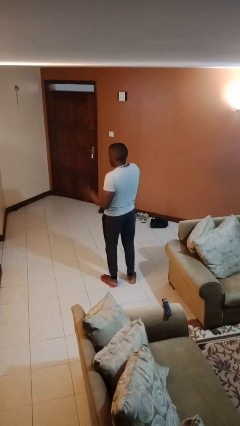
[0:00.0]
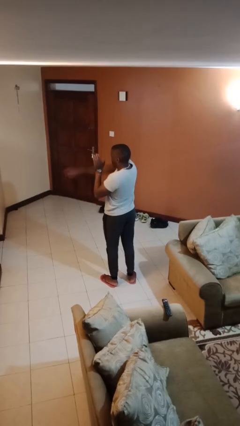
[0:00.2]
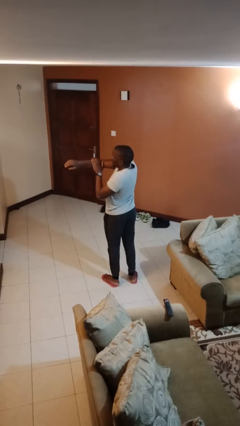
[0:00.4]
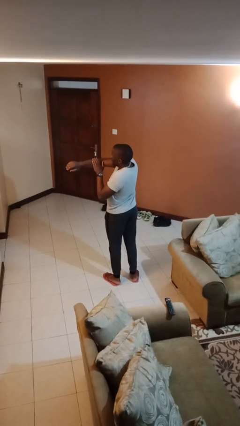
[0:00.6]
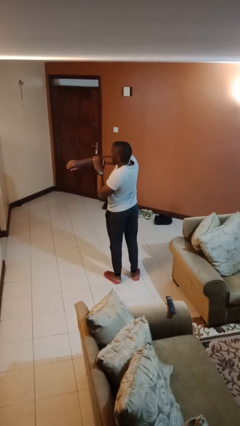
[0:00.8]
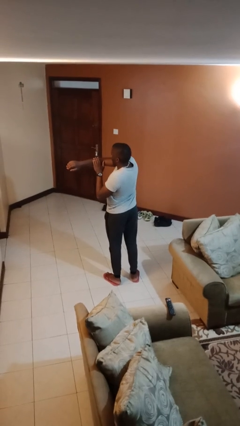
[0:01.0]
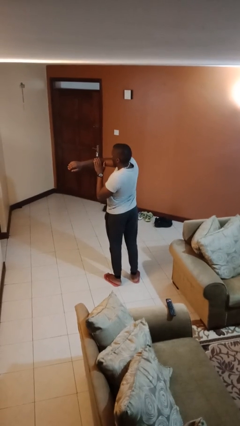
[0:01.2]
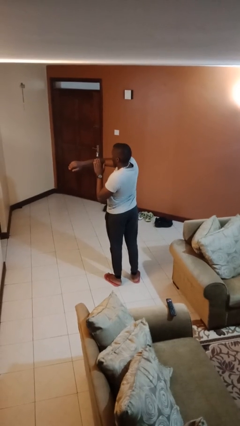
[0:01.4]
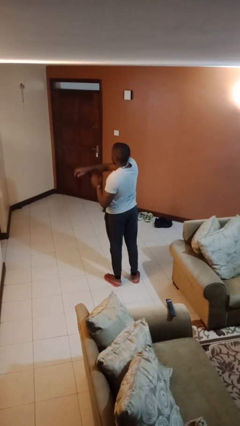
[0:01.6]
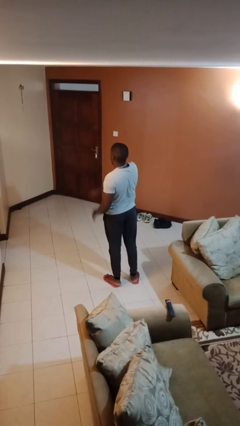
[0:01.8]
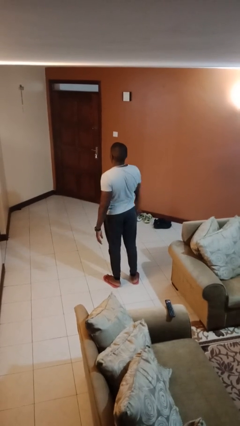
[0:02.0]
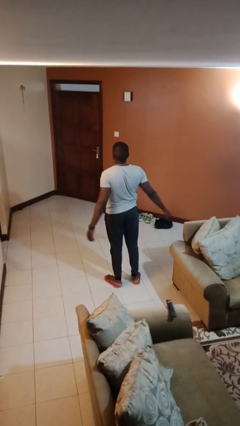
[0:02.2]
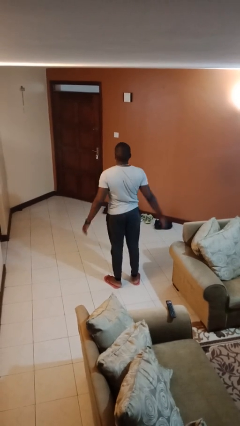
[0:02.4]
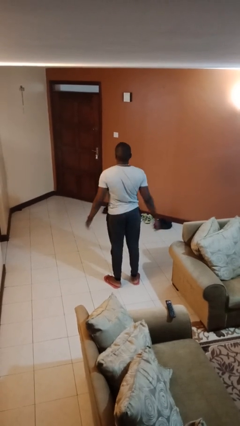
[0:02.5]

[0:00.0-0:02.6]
person swats bug

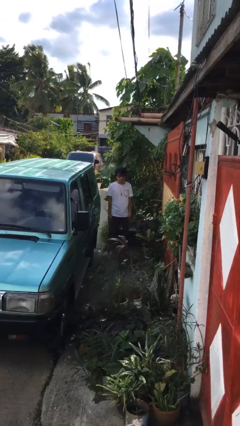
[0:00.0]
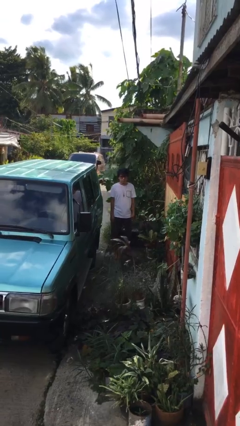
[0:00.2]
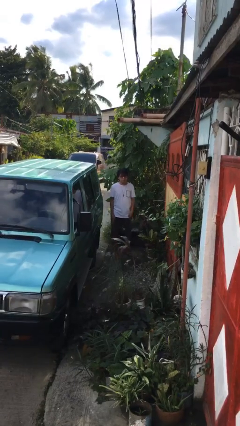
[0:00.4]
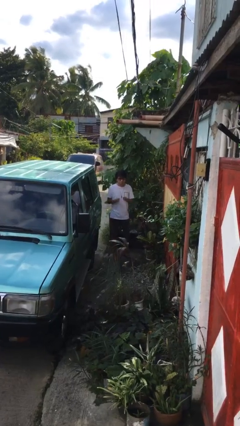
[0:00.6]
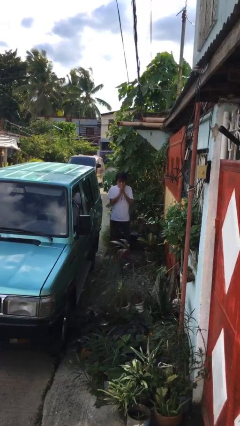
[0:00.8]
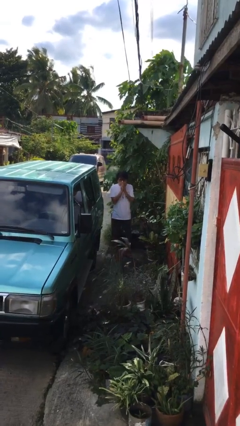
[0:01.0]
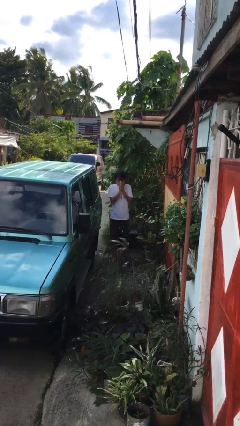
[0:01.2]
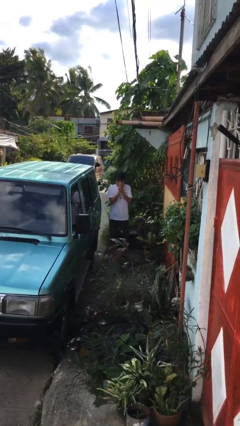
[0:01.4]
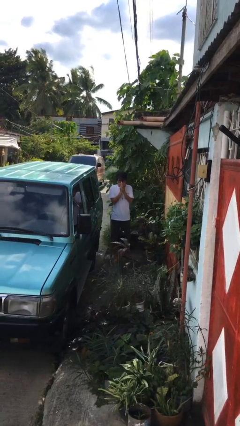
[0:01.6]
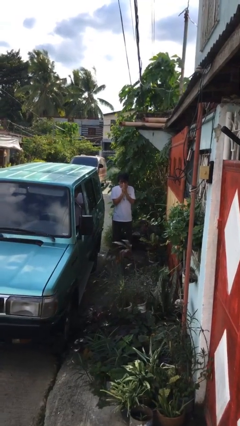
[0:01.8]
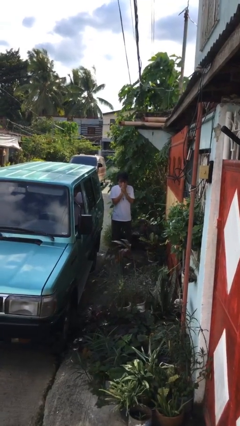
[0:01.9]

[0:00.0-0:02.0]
person blows into hands

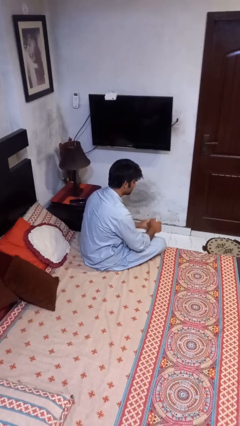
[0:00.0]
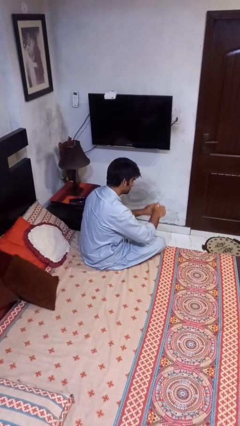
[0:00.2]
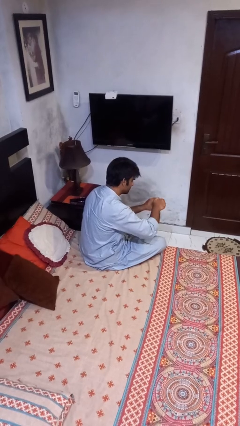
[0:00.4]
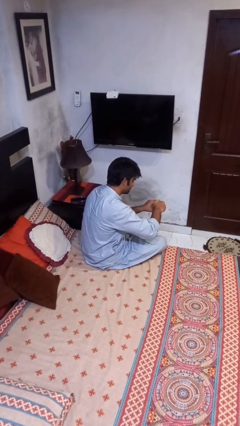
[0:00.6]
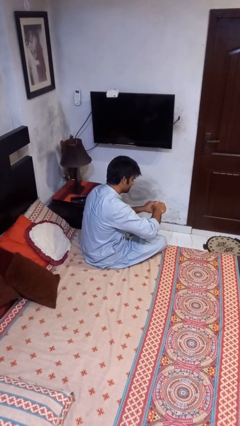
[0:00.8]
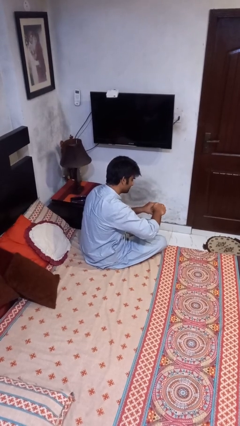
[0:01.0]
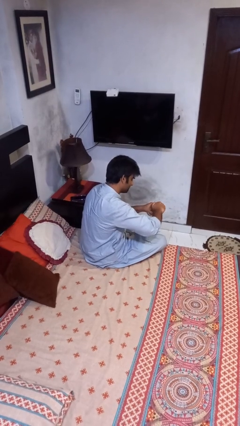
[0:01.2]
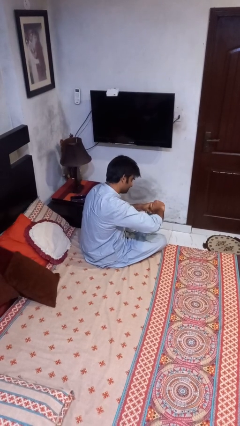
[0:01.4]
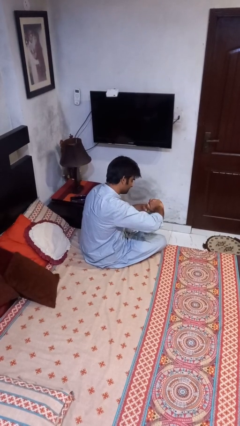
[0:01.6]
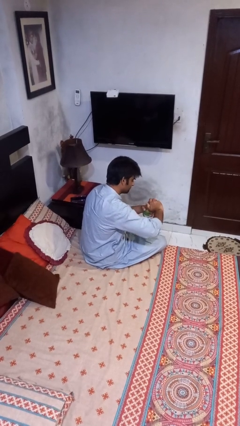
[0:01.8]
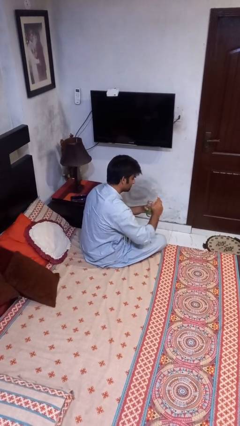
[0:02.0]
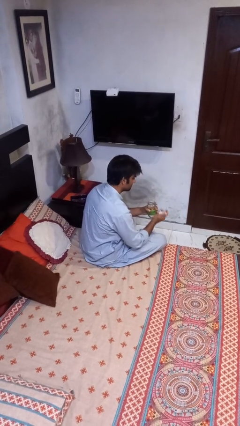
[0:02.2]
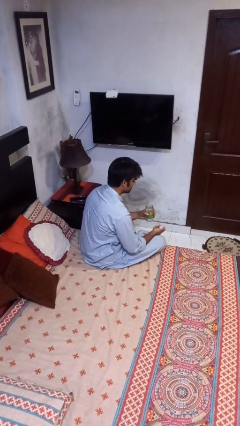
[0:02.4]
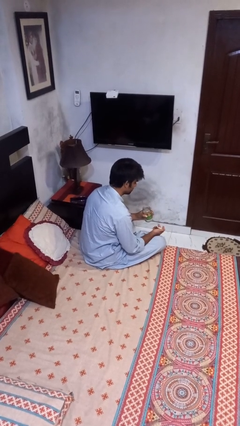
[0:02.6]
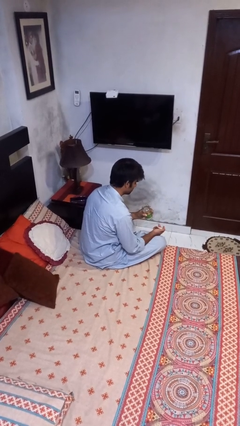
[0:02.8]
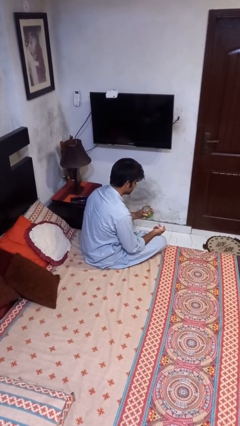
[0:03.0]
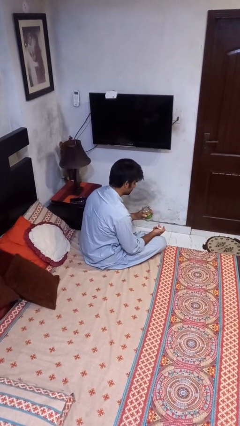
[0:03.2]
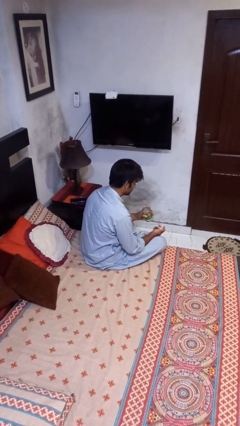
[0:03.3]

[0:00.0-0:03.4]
person opens jar

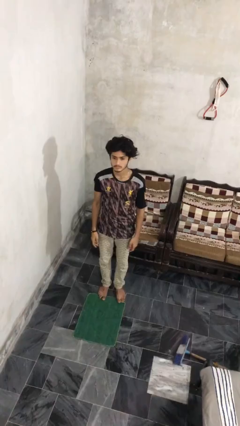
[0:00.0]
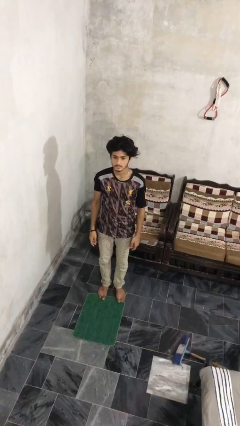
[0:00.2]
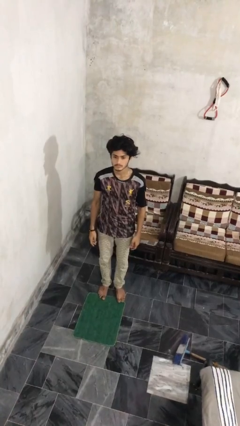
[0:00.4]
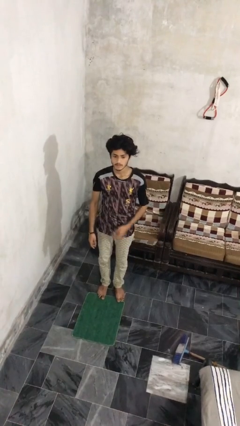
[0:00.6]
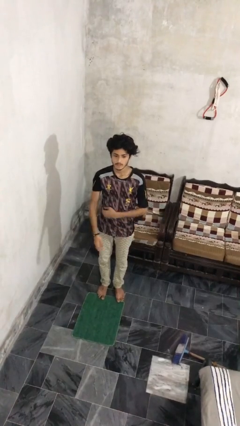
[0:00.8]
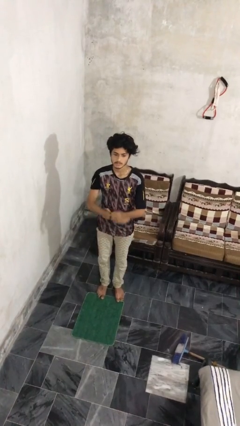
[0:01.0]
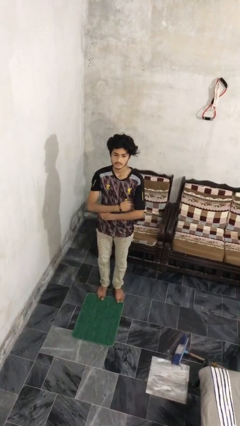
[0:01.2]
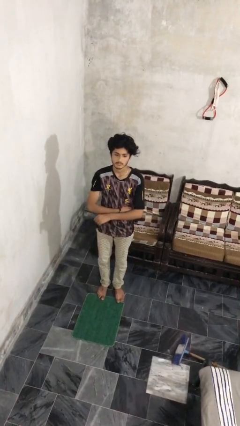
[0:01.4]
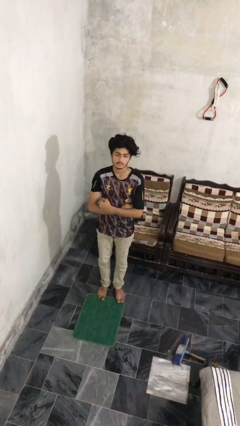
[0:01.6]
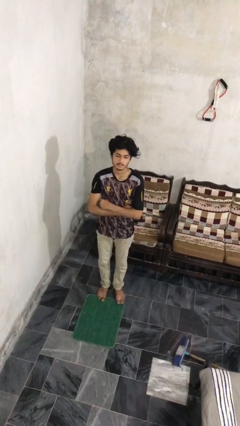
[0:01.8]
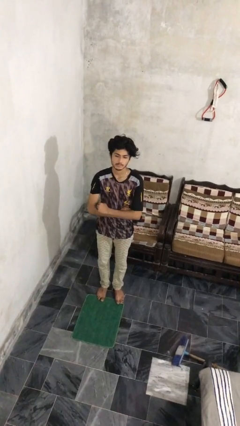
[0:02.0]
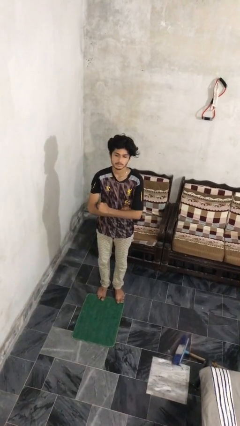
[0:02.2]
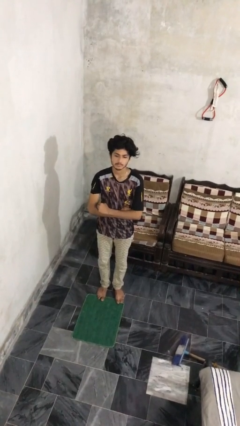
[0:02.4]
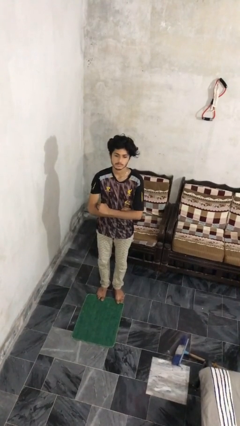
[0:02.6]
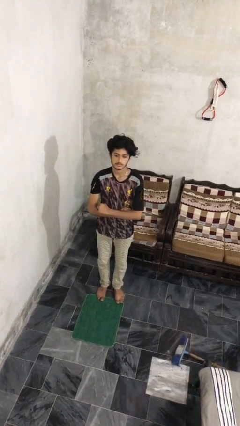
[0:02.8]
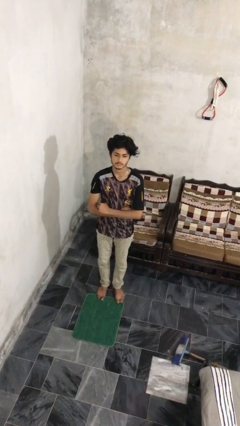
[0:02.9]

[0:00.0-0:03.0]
person crosses arms

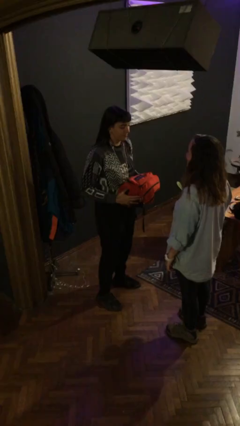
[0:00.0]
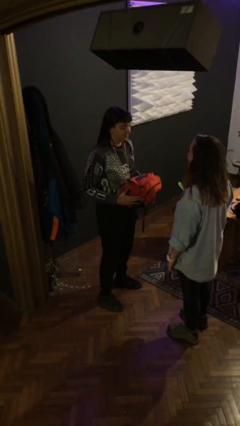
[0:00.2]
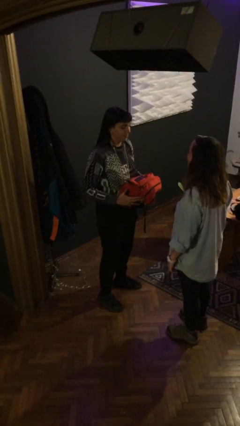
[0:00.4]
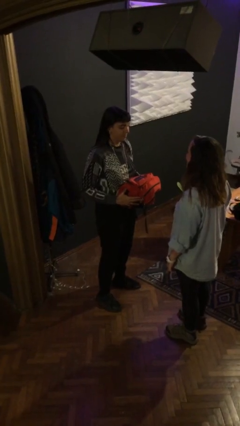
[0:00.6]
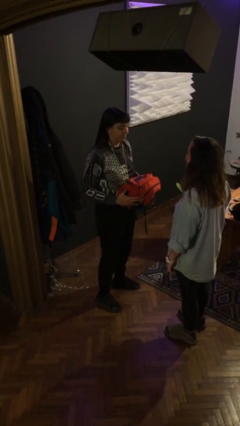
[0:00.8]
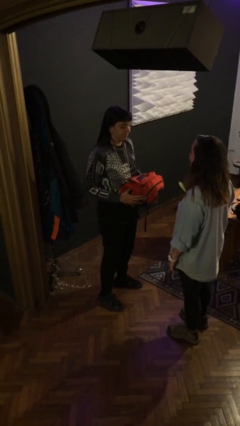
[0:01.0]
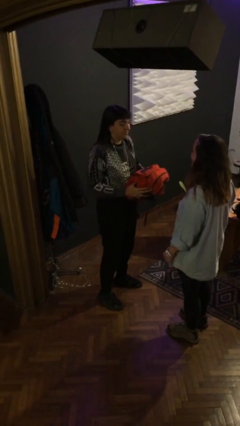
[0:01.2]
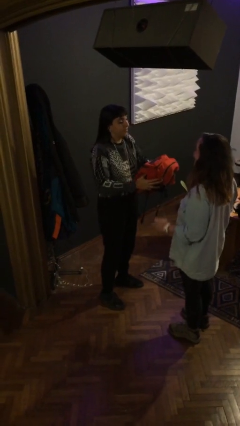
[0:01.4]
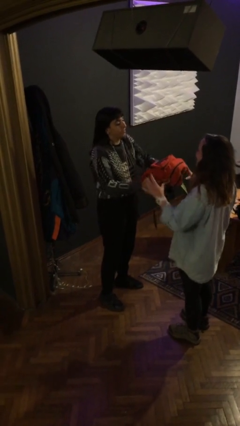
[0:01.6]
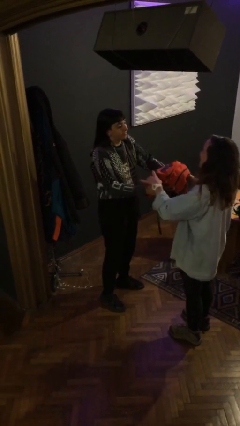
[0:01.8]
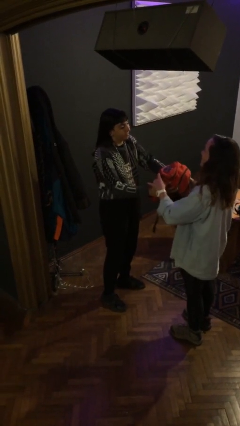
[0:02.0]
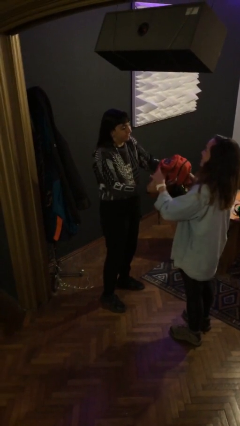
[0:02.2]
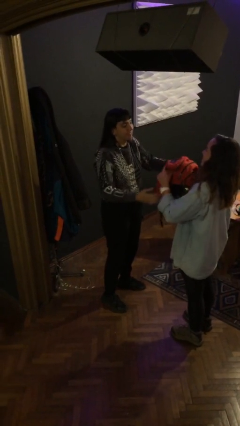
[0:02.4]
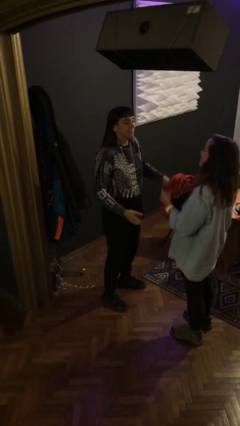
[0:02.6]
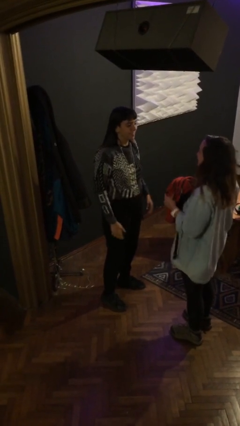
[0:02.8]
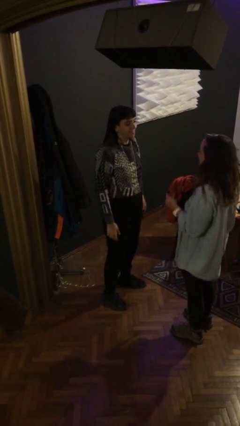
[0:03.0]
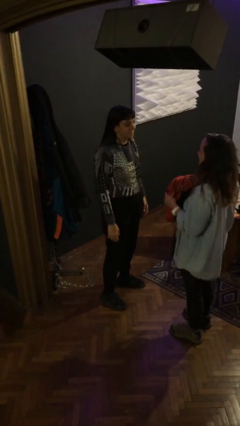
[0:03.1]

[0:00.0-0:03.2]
person transfers object to person

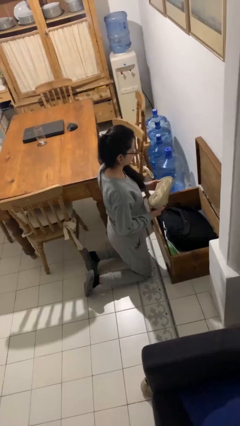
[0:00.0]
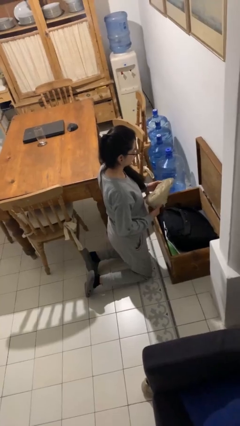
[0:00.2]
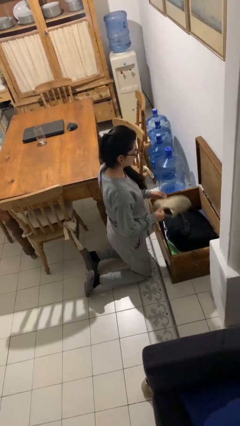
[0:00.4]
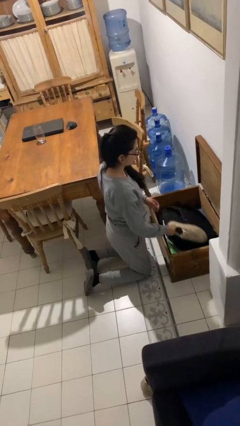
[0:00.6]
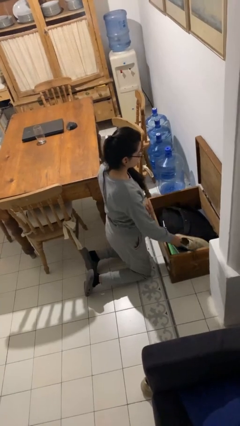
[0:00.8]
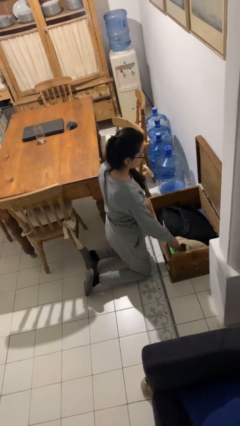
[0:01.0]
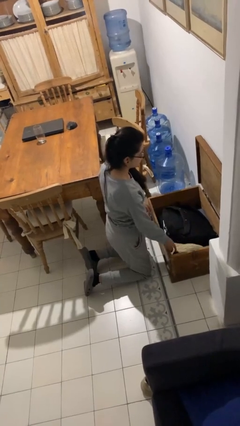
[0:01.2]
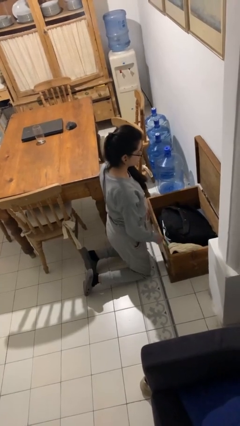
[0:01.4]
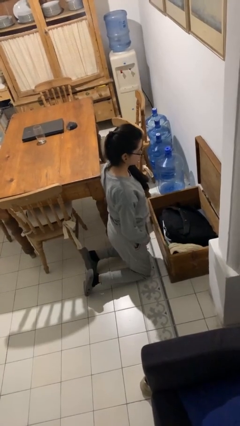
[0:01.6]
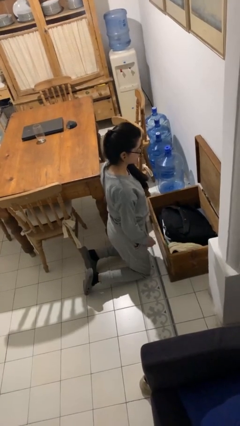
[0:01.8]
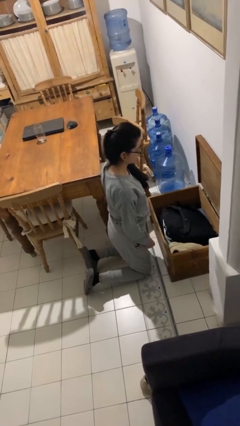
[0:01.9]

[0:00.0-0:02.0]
person puts object into box

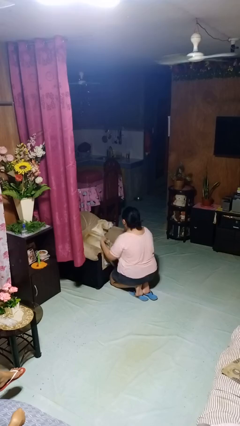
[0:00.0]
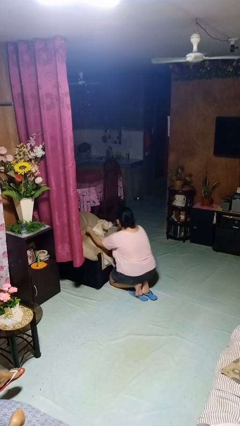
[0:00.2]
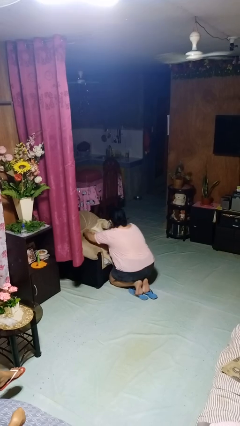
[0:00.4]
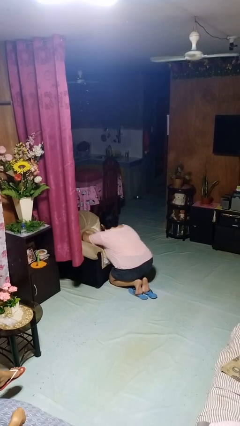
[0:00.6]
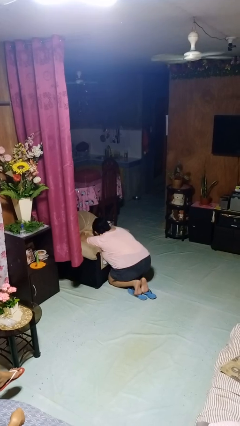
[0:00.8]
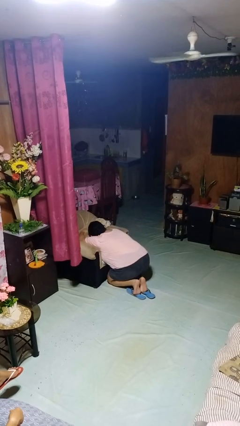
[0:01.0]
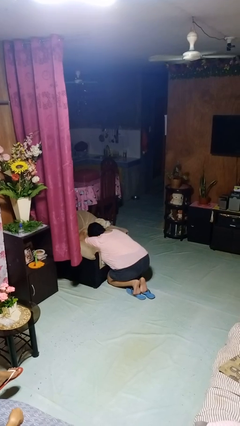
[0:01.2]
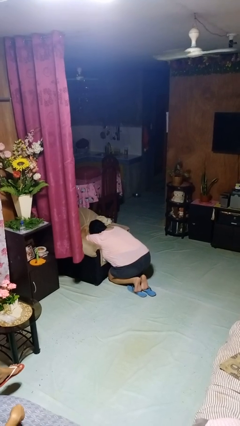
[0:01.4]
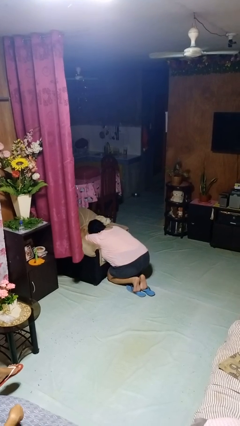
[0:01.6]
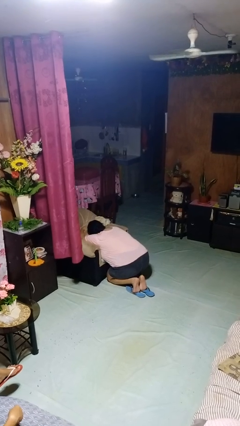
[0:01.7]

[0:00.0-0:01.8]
person hugs dog
